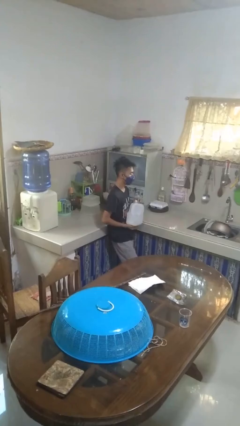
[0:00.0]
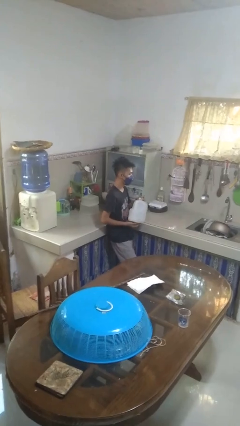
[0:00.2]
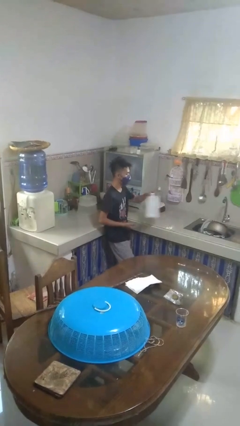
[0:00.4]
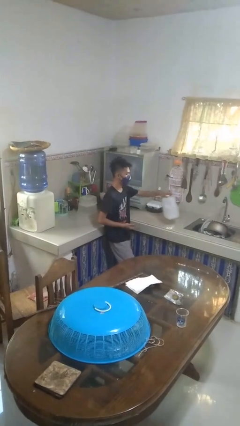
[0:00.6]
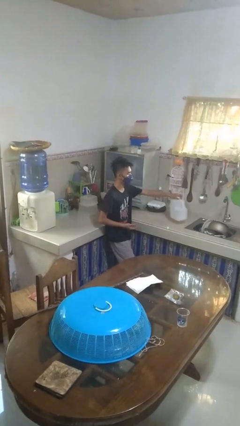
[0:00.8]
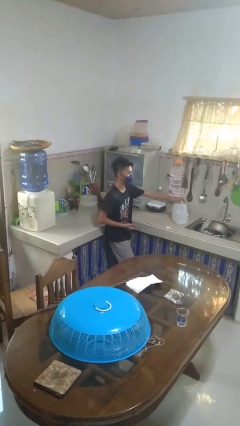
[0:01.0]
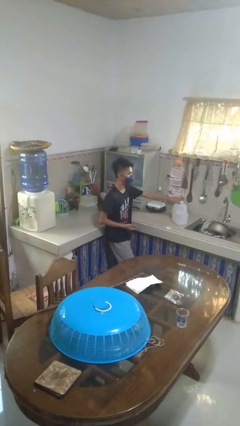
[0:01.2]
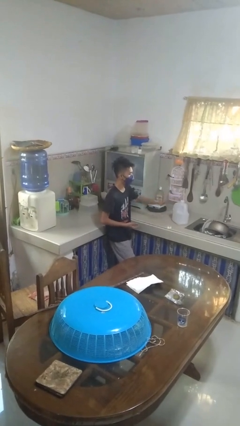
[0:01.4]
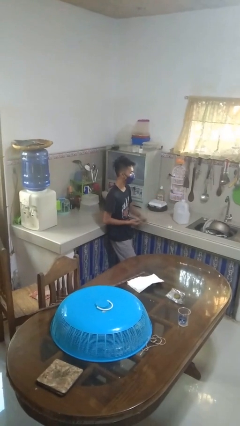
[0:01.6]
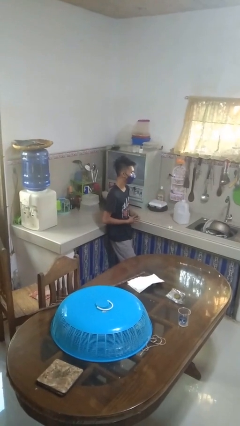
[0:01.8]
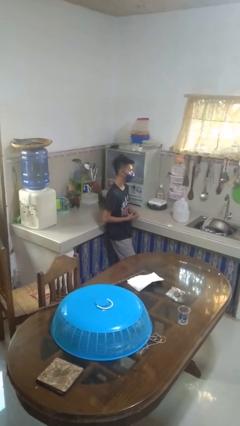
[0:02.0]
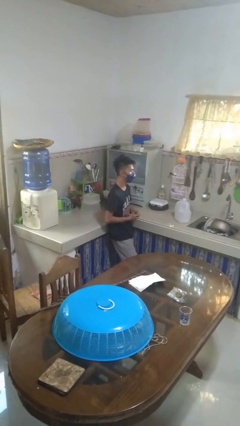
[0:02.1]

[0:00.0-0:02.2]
person puts down object on countertop

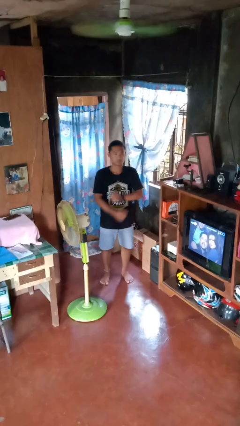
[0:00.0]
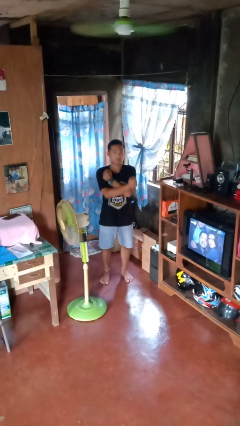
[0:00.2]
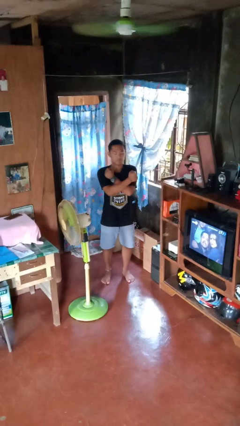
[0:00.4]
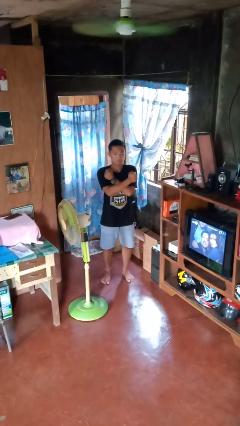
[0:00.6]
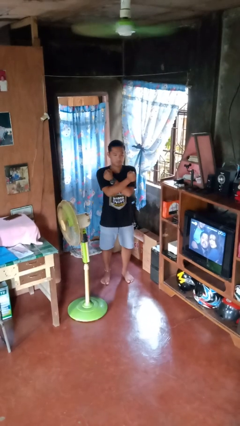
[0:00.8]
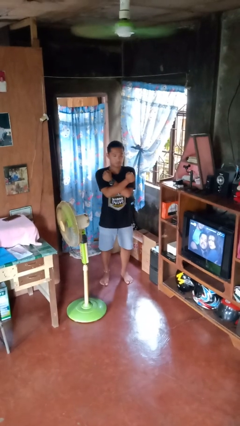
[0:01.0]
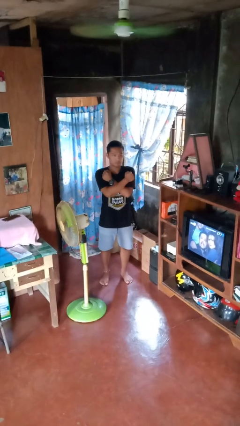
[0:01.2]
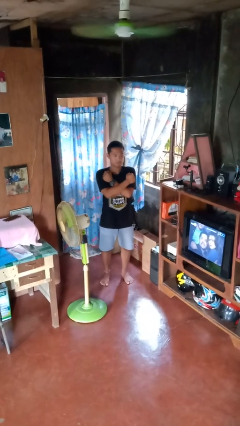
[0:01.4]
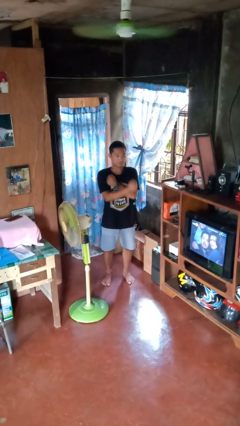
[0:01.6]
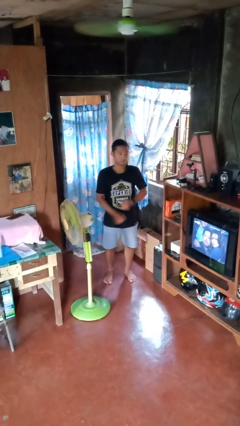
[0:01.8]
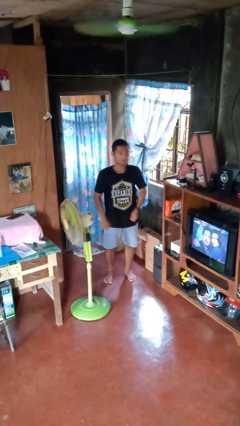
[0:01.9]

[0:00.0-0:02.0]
person gestures arms x

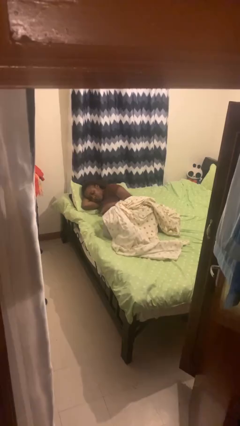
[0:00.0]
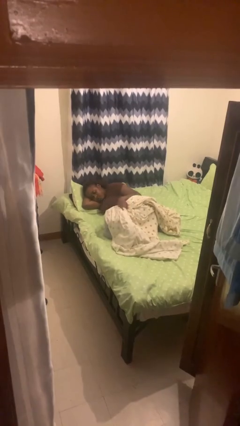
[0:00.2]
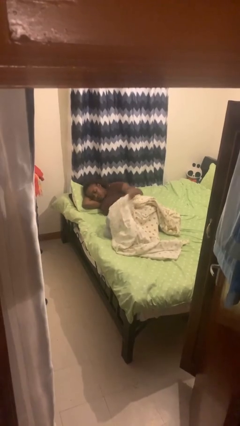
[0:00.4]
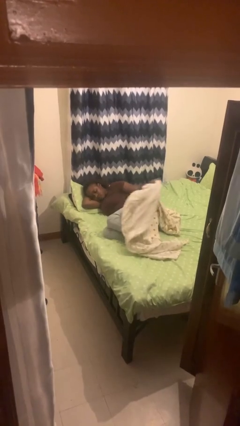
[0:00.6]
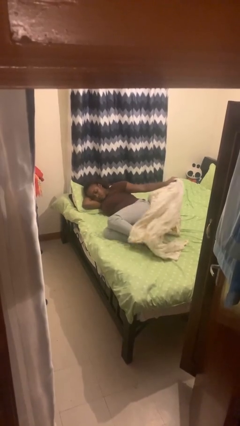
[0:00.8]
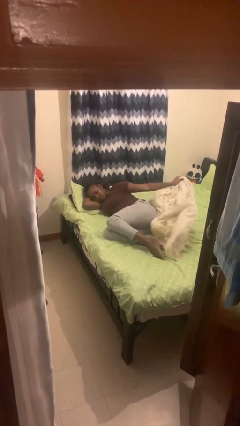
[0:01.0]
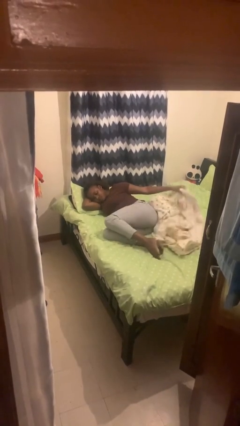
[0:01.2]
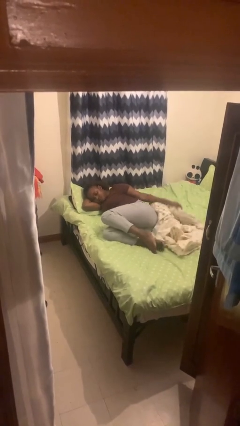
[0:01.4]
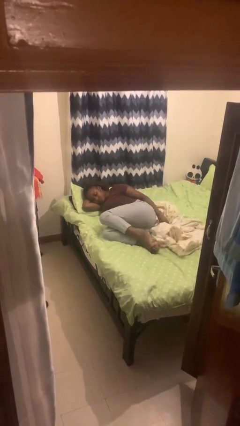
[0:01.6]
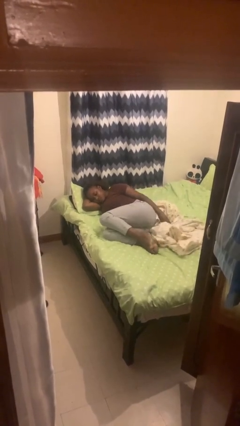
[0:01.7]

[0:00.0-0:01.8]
person uncovers with bedsheets

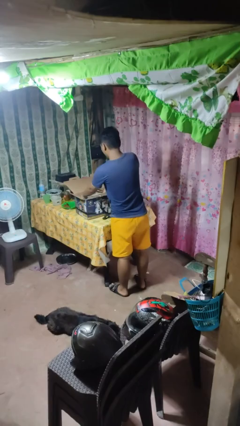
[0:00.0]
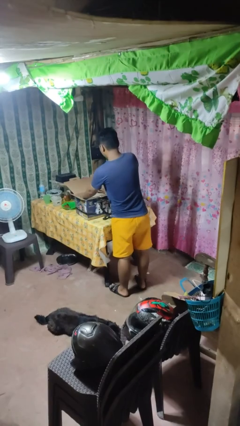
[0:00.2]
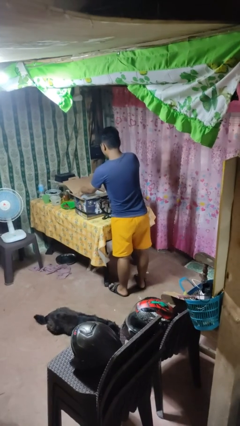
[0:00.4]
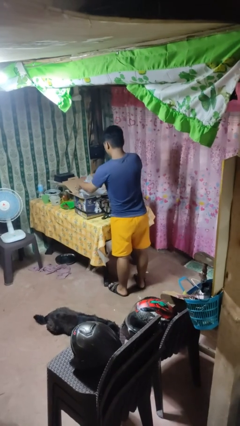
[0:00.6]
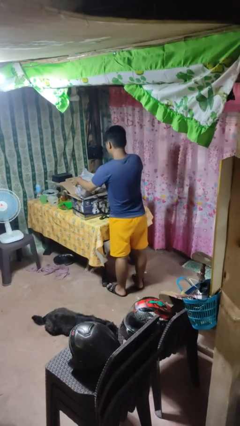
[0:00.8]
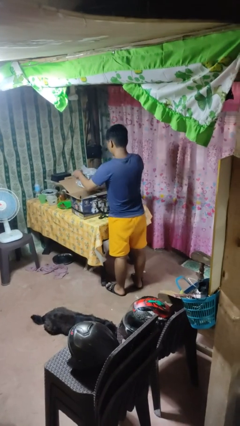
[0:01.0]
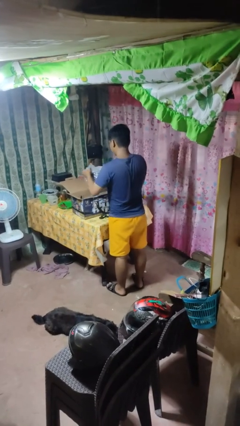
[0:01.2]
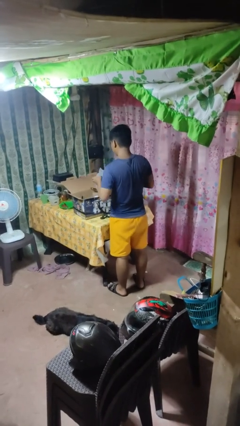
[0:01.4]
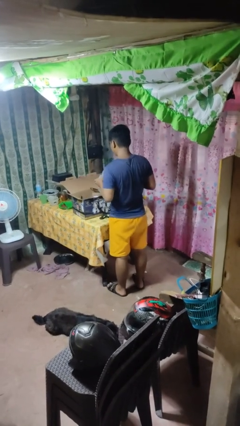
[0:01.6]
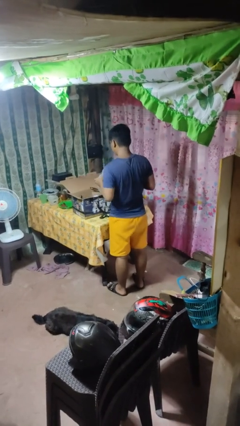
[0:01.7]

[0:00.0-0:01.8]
person takes object from box

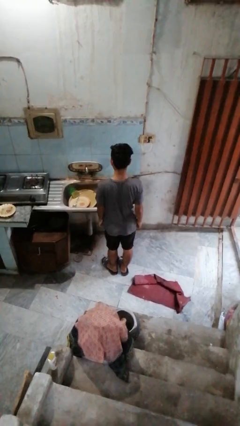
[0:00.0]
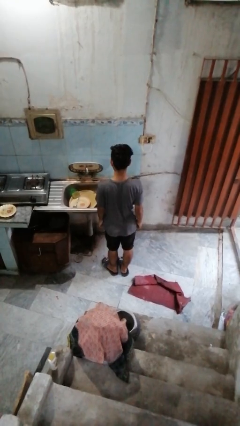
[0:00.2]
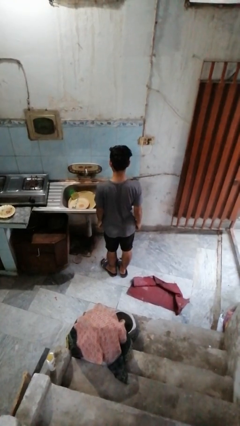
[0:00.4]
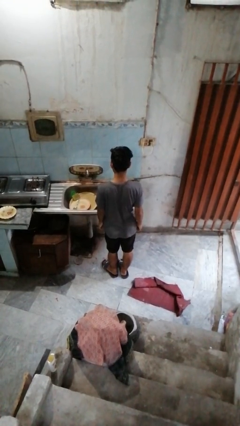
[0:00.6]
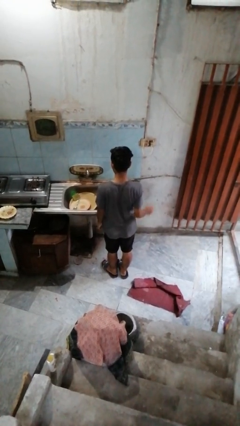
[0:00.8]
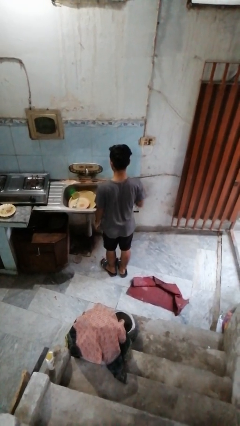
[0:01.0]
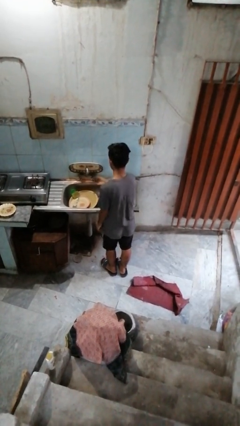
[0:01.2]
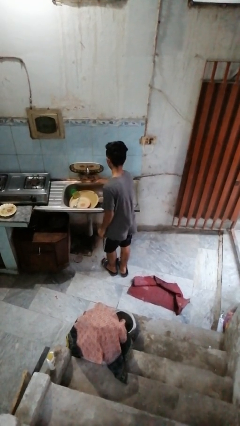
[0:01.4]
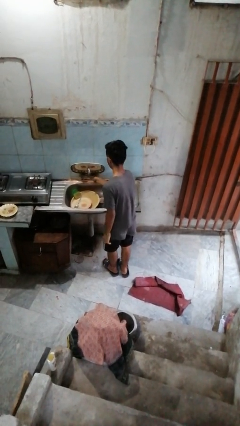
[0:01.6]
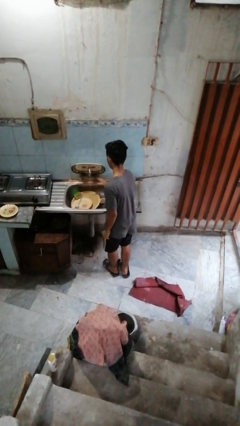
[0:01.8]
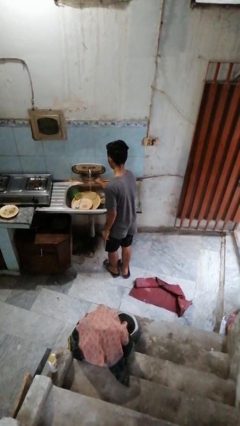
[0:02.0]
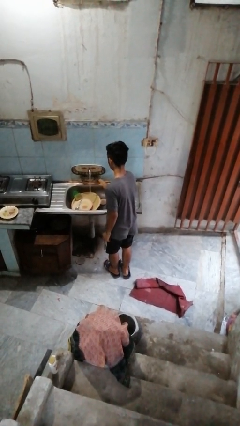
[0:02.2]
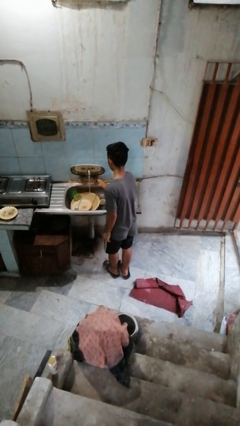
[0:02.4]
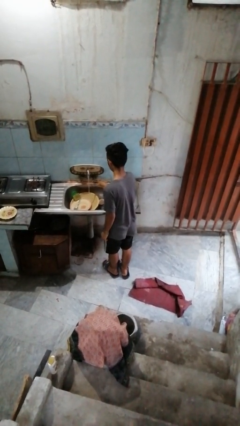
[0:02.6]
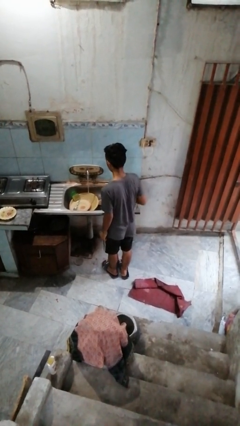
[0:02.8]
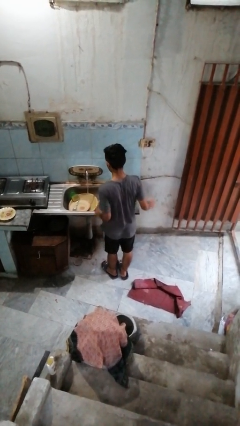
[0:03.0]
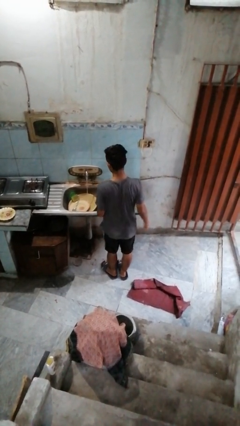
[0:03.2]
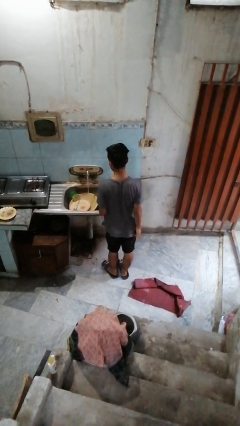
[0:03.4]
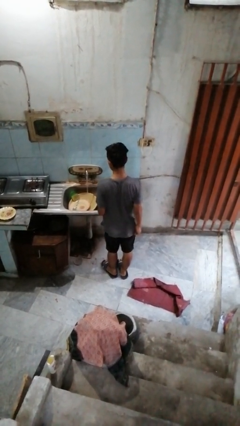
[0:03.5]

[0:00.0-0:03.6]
person turns on faucet

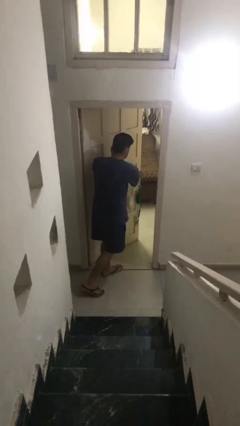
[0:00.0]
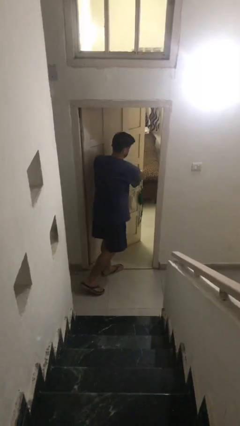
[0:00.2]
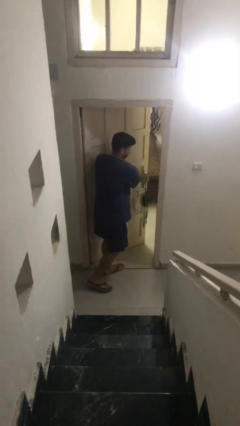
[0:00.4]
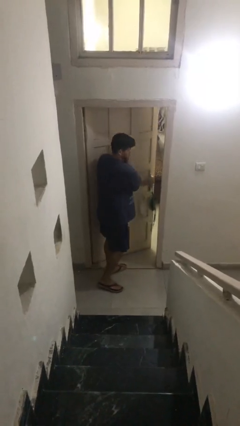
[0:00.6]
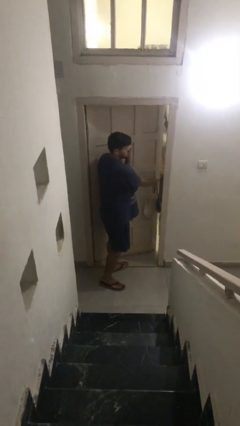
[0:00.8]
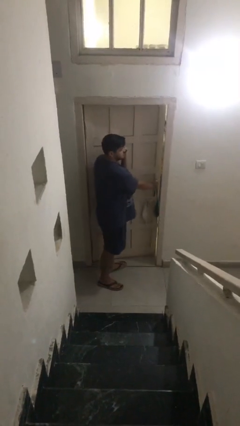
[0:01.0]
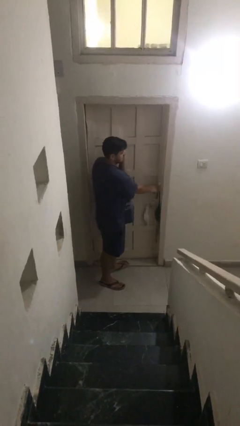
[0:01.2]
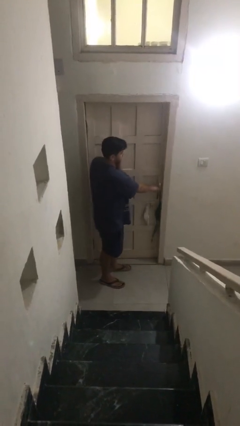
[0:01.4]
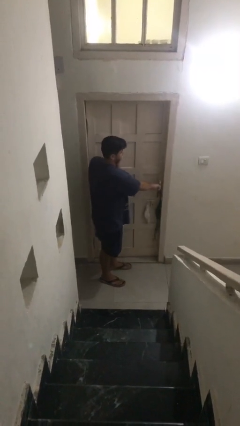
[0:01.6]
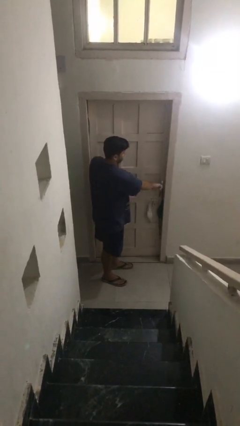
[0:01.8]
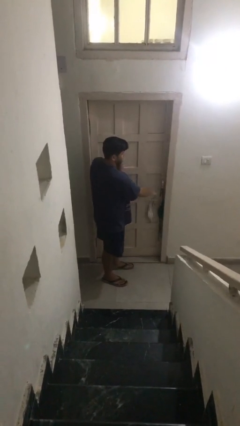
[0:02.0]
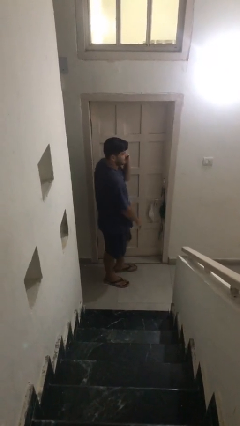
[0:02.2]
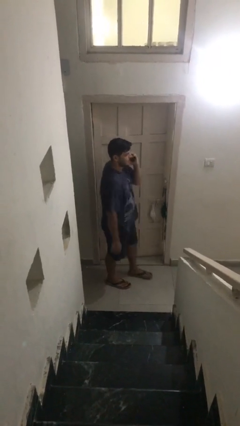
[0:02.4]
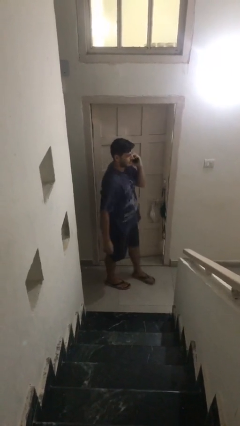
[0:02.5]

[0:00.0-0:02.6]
person closes facility door

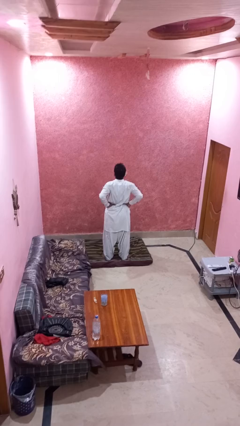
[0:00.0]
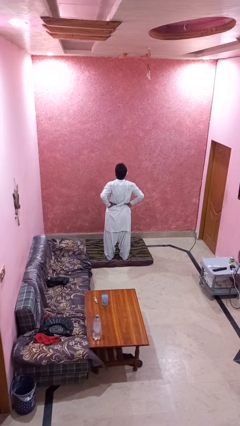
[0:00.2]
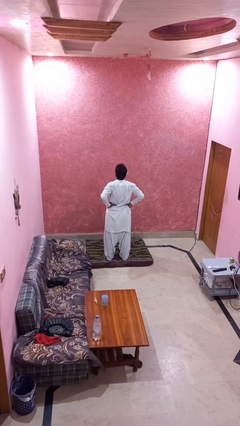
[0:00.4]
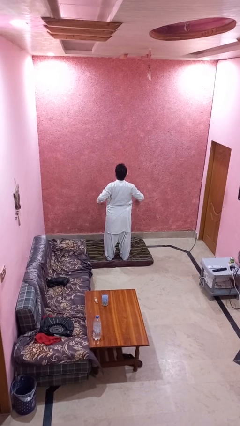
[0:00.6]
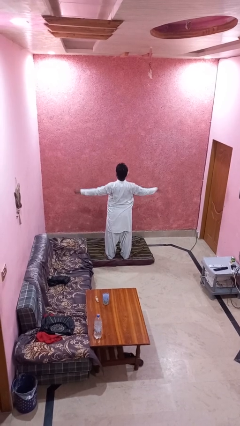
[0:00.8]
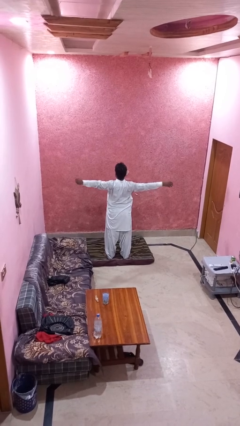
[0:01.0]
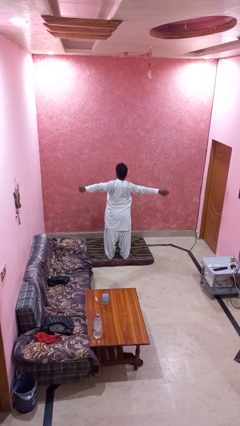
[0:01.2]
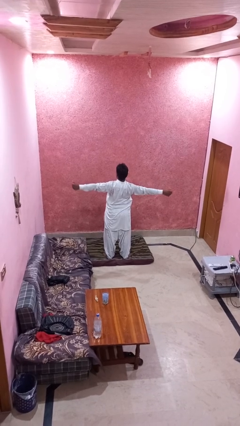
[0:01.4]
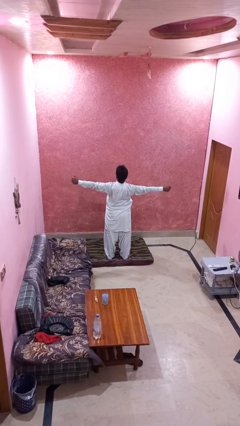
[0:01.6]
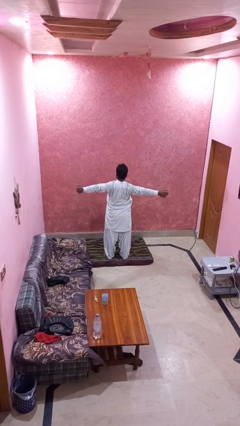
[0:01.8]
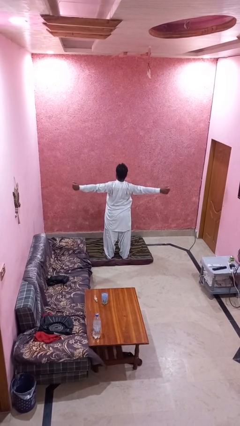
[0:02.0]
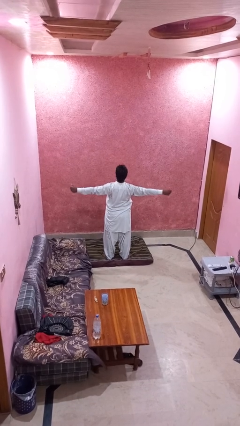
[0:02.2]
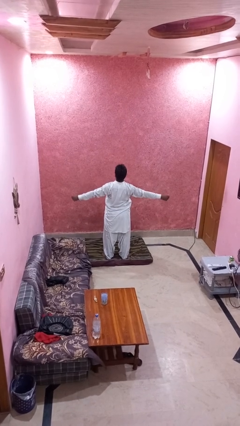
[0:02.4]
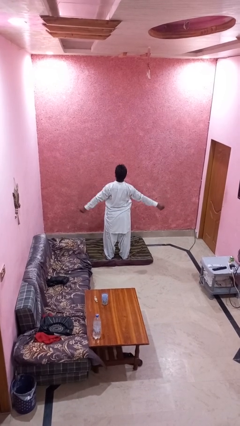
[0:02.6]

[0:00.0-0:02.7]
person stretches arms to side
